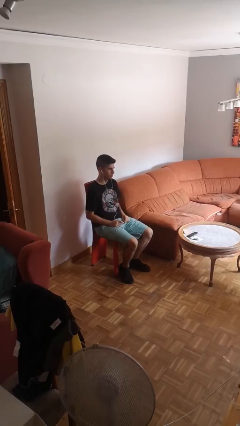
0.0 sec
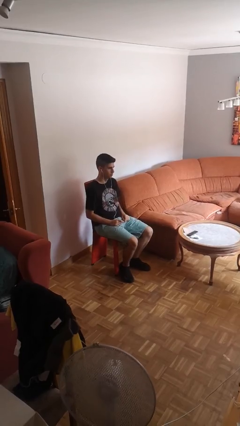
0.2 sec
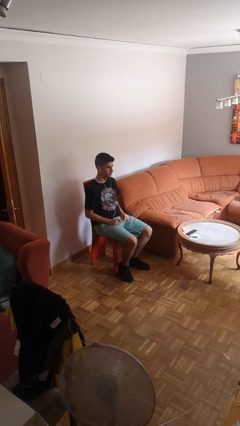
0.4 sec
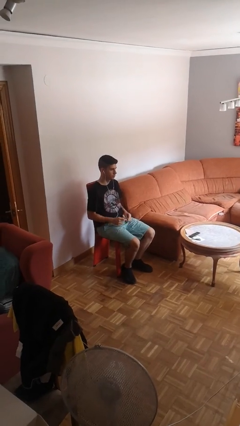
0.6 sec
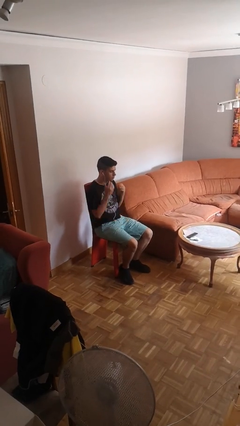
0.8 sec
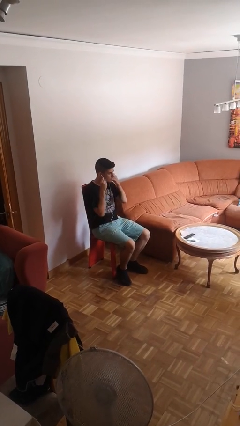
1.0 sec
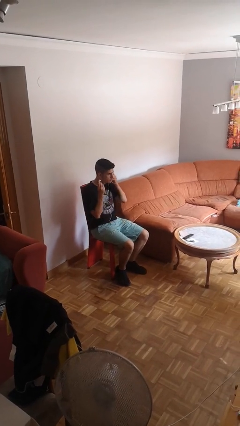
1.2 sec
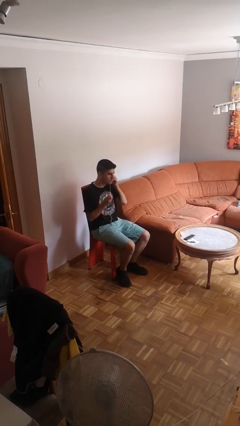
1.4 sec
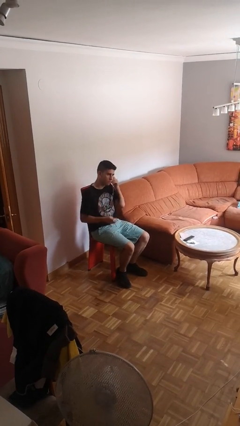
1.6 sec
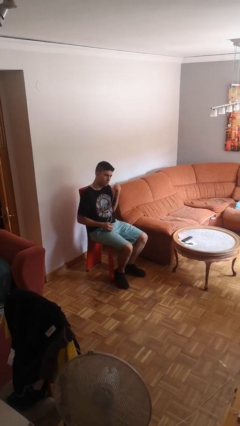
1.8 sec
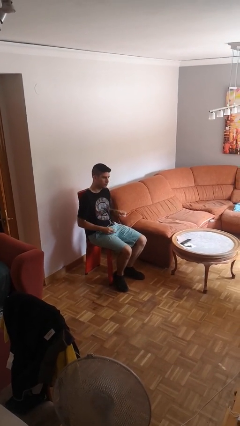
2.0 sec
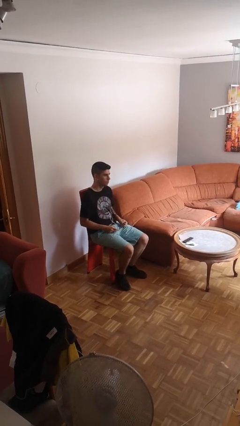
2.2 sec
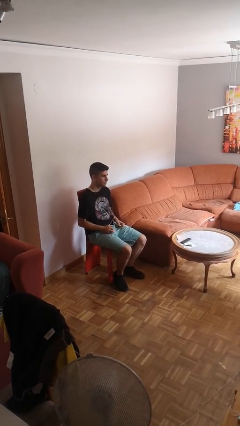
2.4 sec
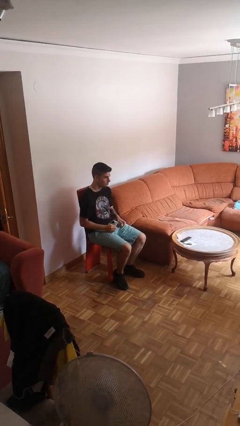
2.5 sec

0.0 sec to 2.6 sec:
person takes off headphones

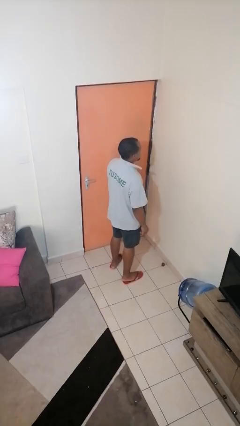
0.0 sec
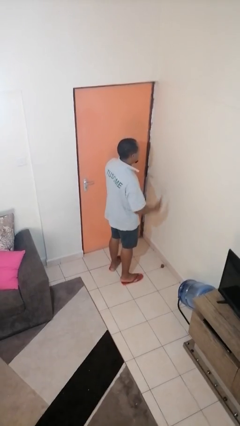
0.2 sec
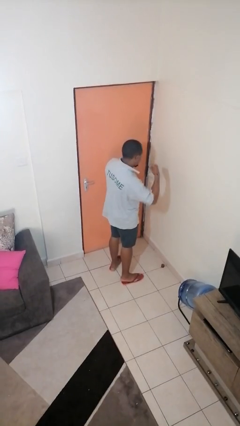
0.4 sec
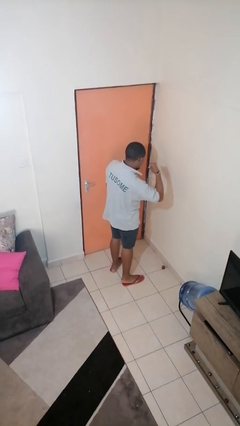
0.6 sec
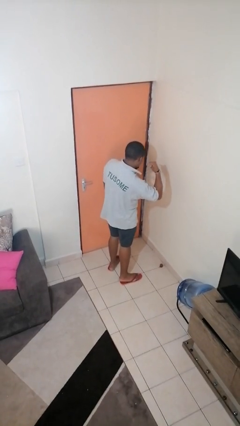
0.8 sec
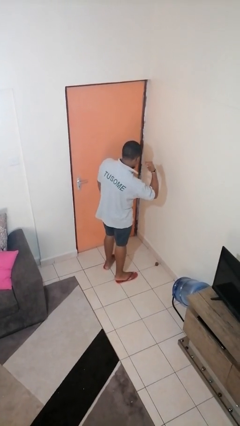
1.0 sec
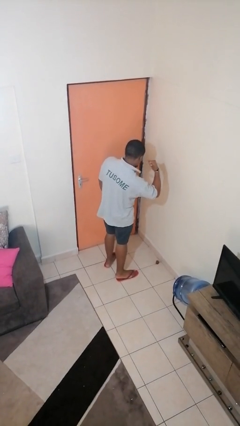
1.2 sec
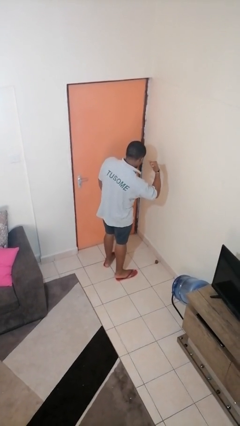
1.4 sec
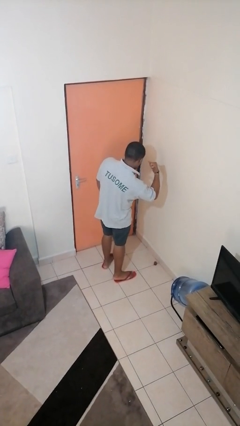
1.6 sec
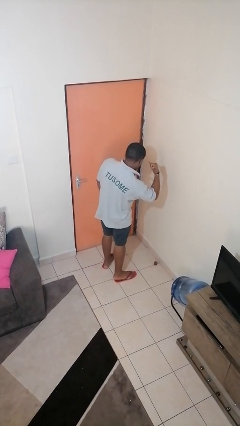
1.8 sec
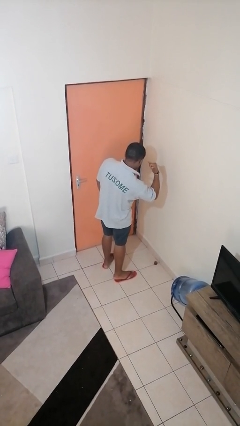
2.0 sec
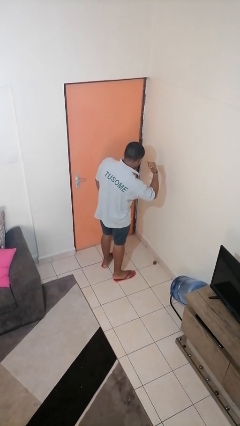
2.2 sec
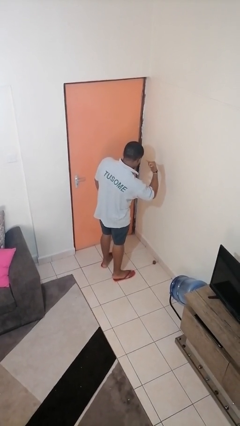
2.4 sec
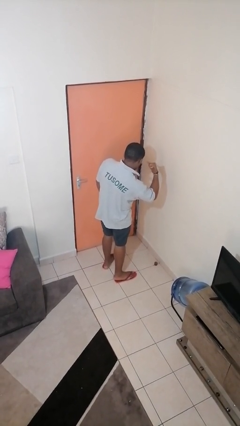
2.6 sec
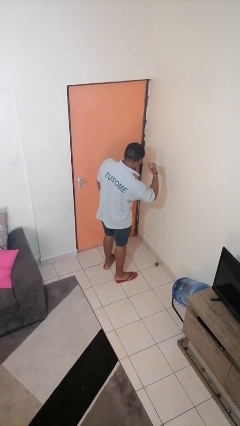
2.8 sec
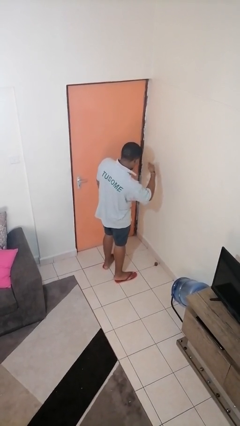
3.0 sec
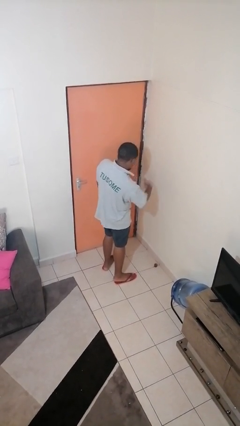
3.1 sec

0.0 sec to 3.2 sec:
person gestures call me

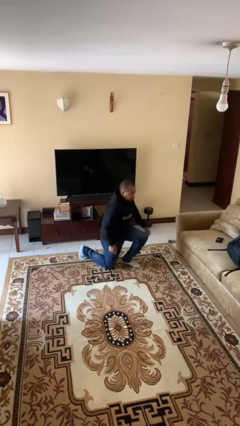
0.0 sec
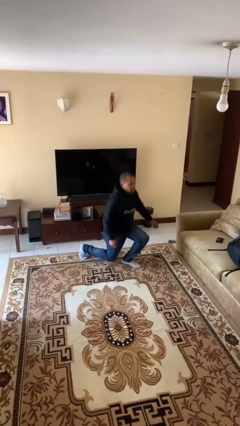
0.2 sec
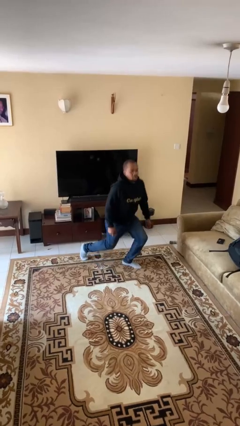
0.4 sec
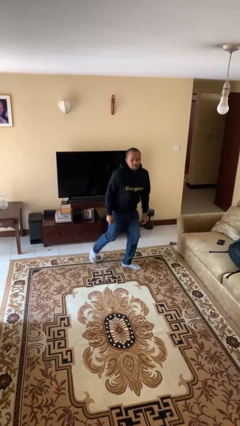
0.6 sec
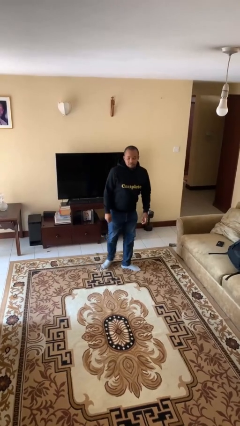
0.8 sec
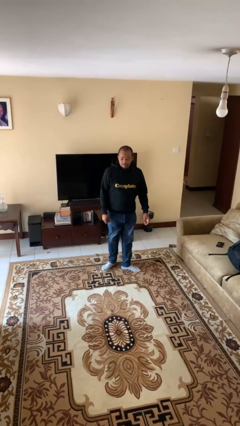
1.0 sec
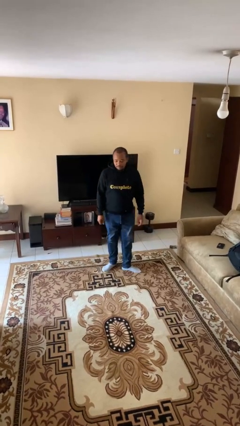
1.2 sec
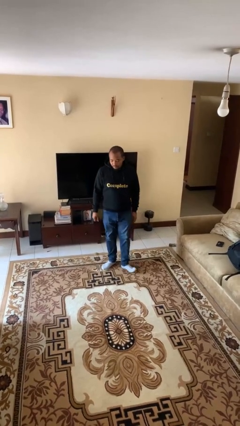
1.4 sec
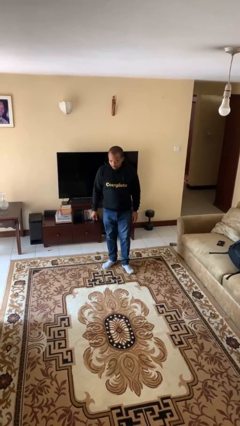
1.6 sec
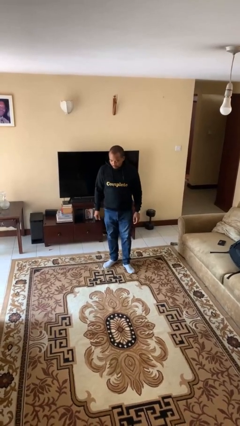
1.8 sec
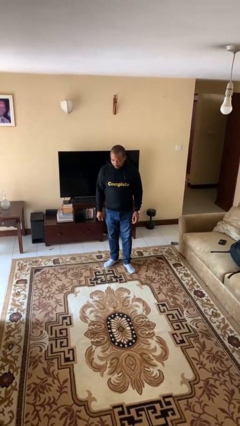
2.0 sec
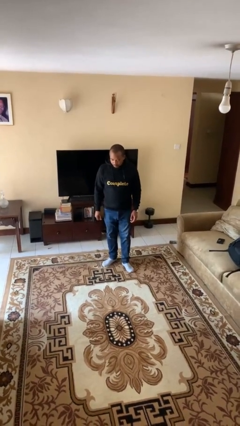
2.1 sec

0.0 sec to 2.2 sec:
person stands up from floor

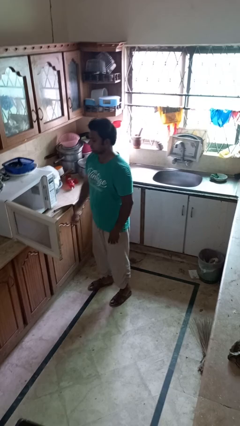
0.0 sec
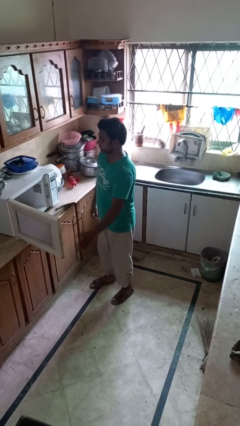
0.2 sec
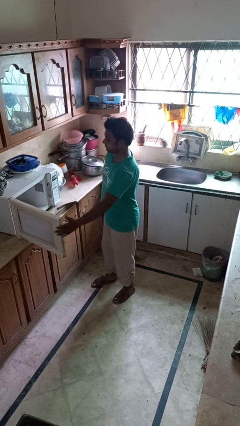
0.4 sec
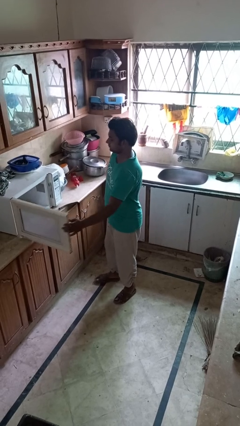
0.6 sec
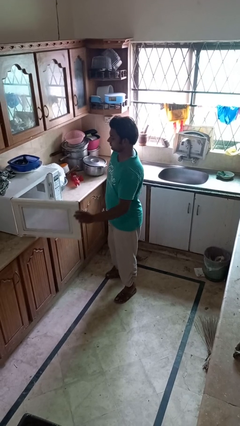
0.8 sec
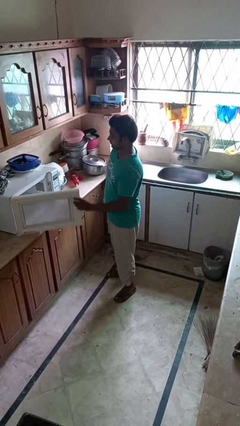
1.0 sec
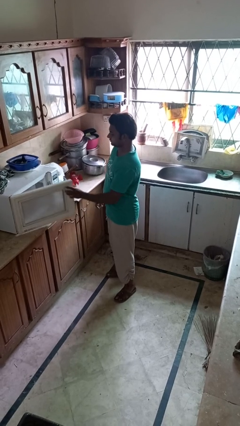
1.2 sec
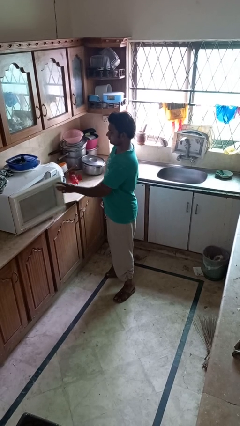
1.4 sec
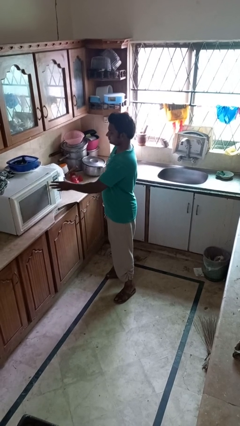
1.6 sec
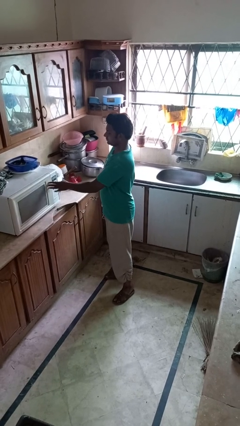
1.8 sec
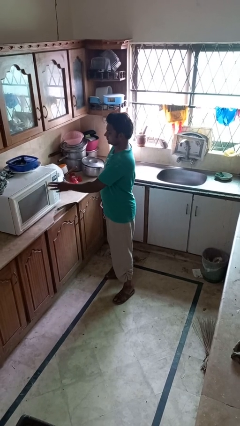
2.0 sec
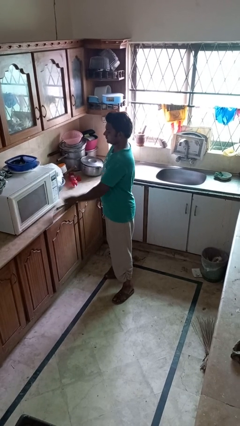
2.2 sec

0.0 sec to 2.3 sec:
person closes microwave

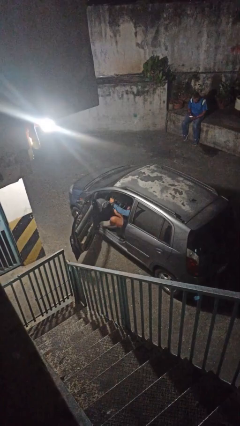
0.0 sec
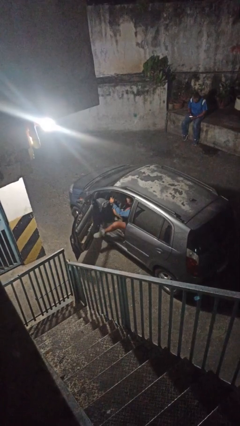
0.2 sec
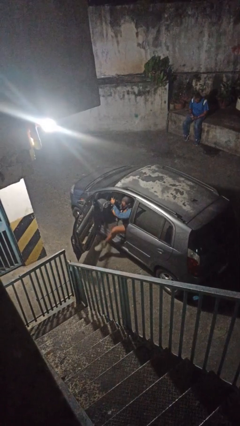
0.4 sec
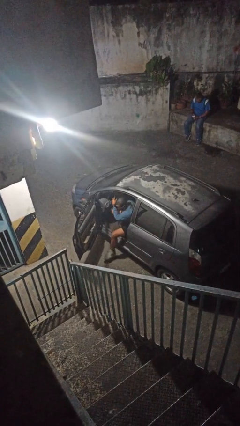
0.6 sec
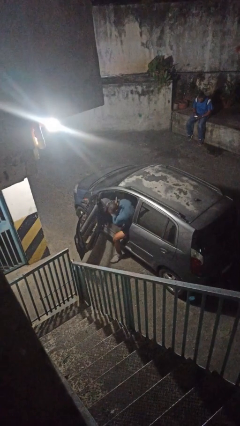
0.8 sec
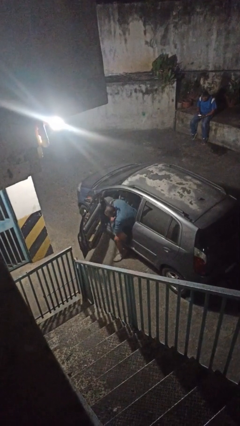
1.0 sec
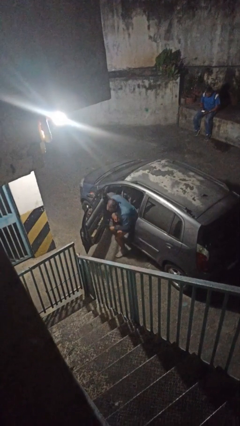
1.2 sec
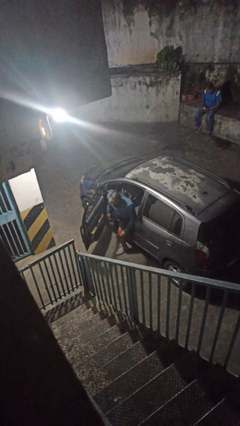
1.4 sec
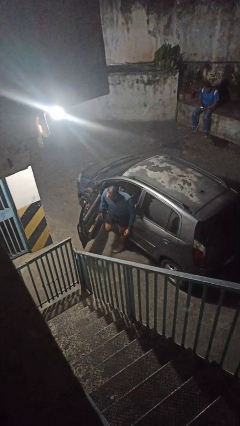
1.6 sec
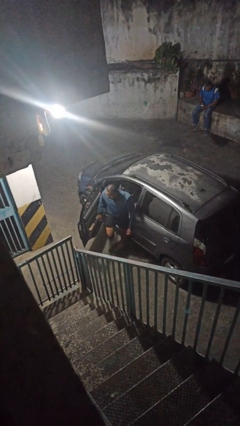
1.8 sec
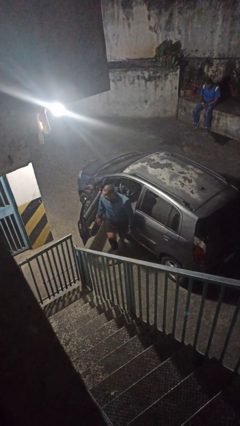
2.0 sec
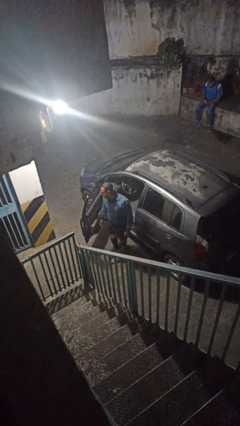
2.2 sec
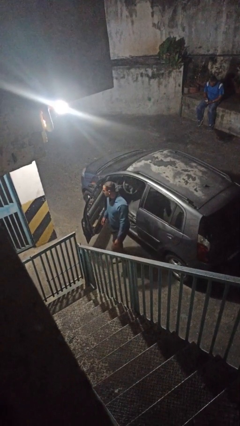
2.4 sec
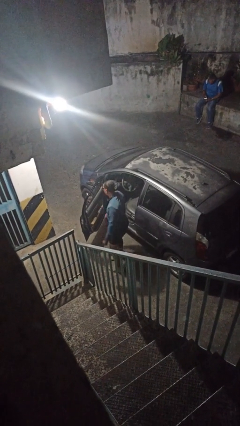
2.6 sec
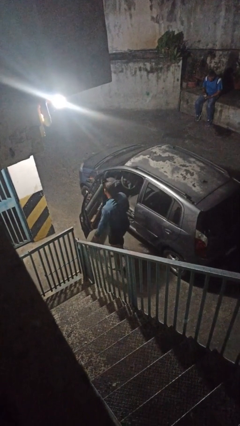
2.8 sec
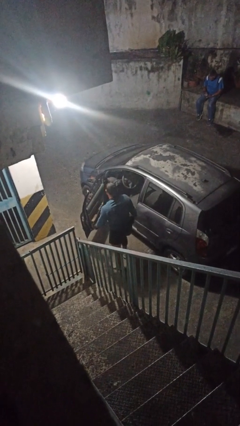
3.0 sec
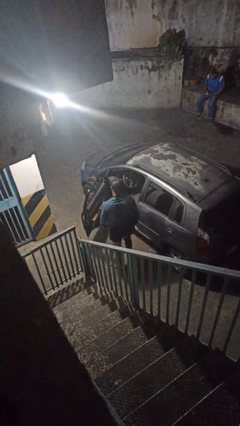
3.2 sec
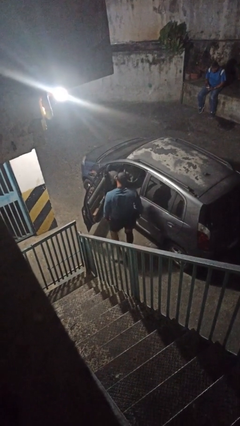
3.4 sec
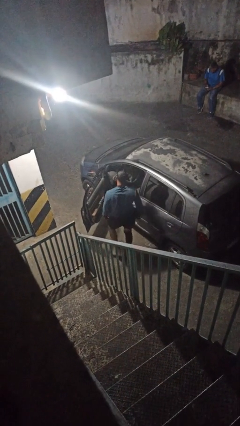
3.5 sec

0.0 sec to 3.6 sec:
person exits car

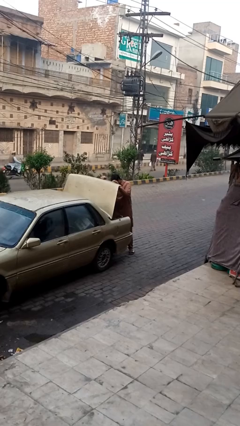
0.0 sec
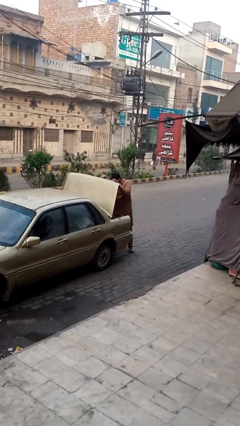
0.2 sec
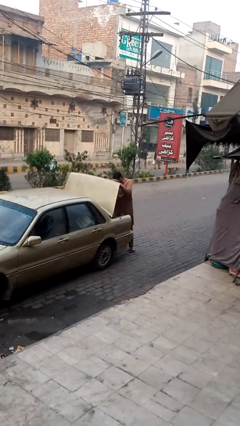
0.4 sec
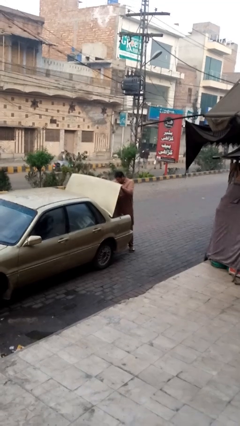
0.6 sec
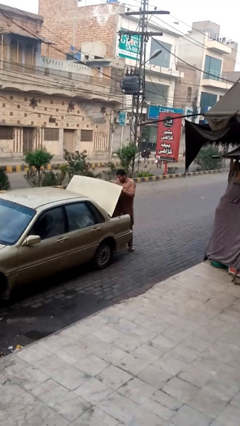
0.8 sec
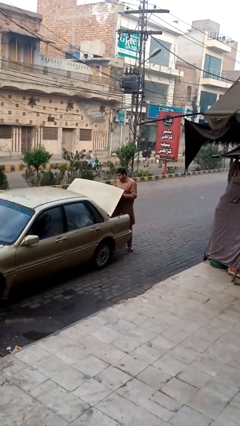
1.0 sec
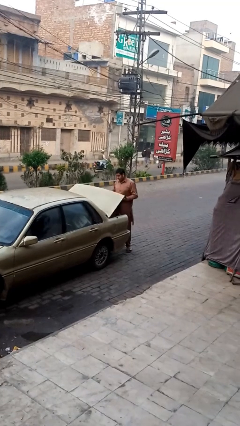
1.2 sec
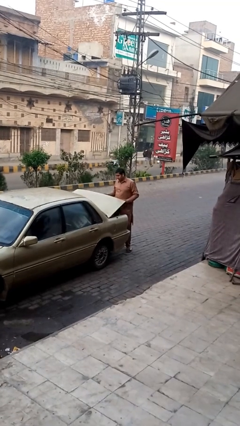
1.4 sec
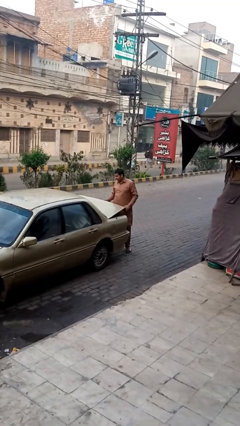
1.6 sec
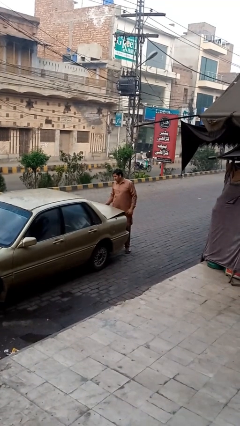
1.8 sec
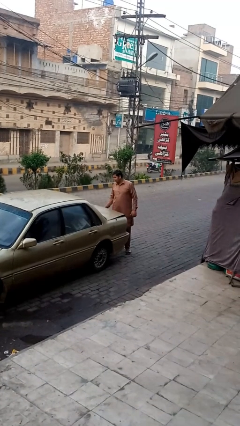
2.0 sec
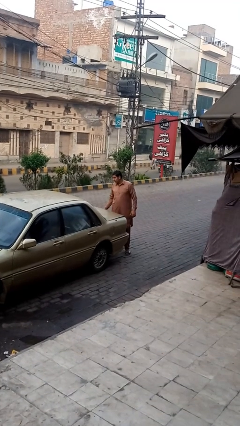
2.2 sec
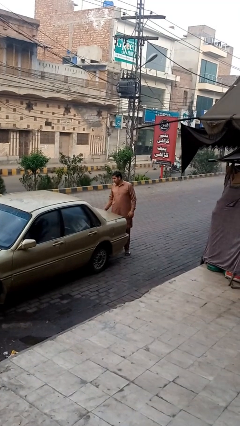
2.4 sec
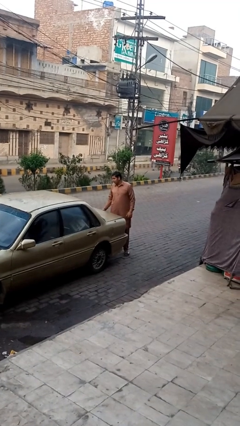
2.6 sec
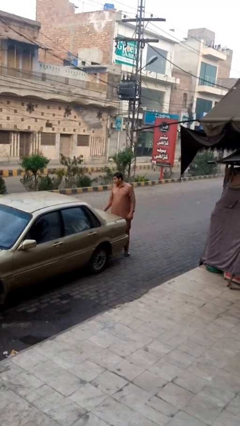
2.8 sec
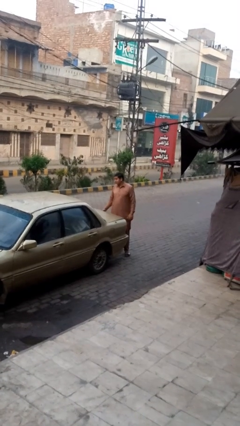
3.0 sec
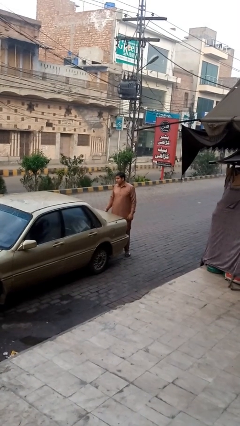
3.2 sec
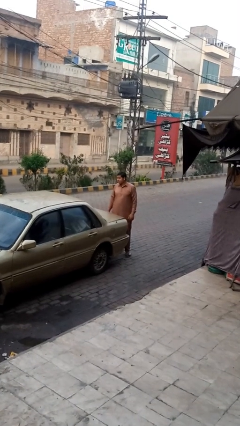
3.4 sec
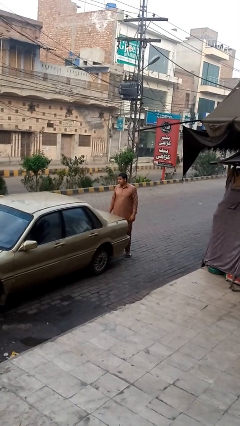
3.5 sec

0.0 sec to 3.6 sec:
person closes car trunk

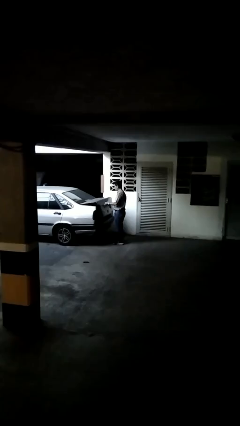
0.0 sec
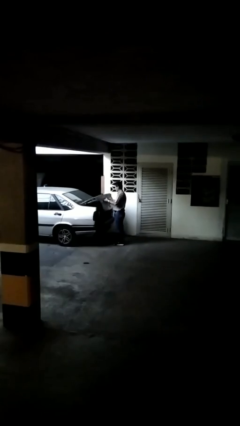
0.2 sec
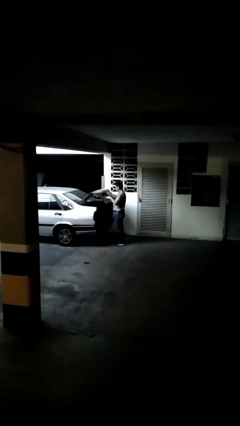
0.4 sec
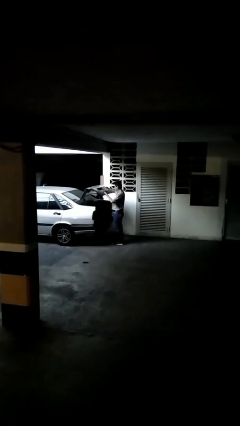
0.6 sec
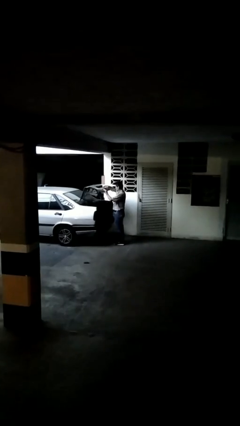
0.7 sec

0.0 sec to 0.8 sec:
person opens car trunk
